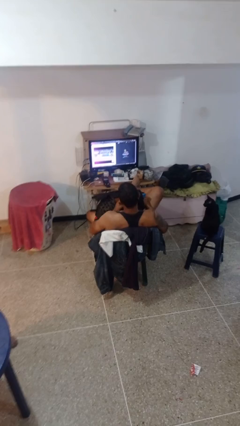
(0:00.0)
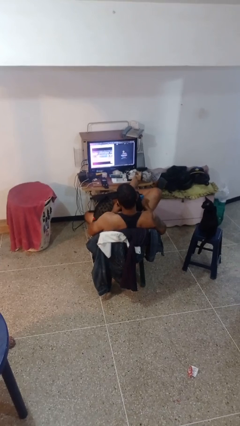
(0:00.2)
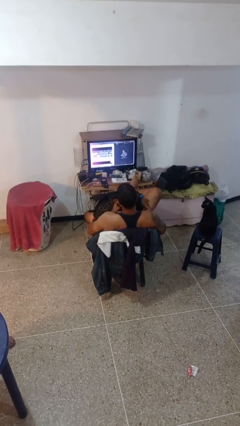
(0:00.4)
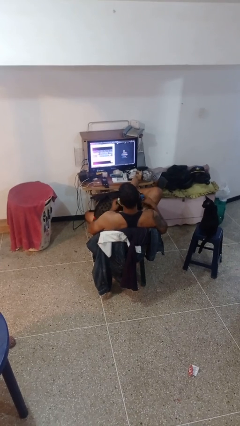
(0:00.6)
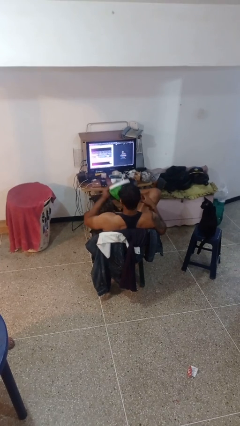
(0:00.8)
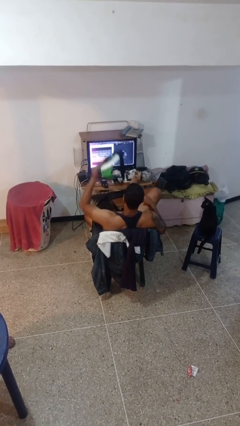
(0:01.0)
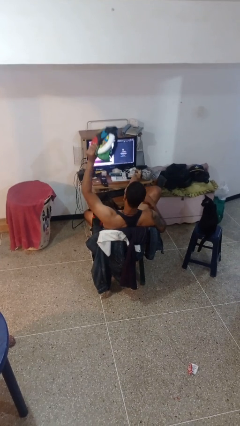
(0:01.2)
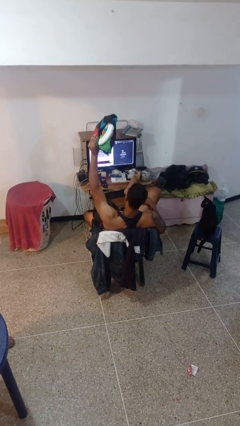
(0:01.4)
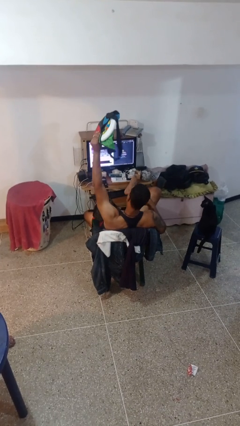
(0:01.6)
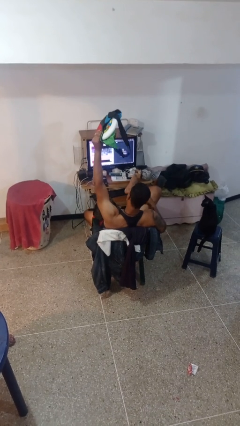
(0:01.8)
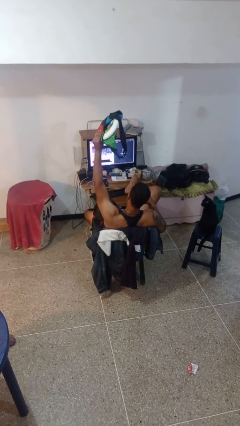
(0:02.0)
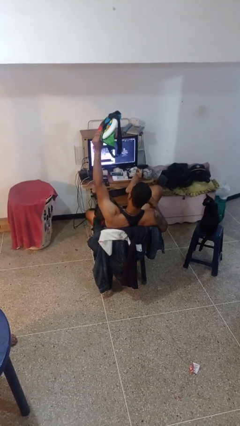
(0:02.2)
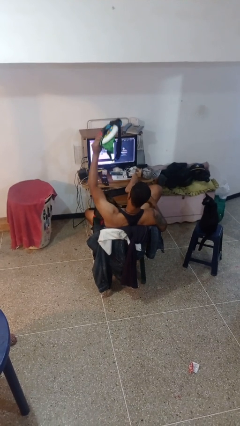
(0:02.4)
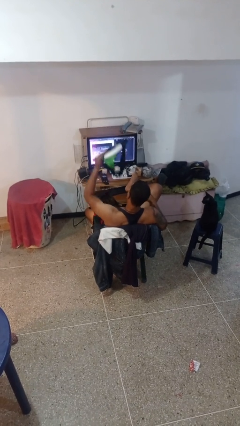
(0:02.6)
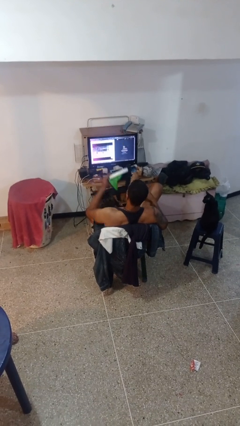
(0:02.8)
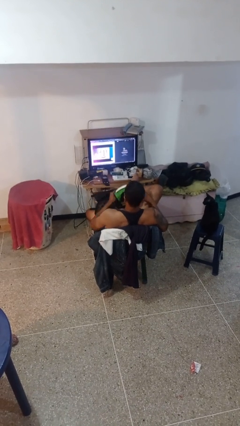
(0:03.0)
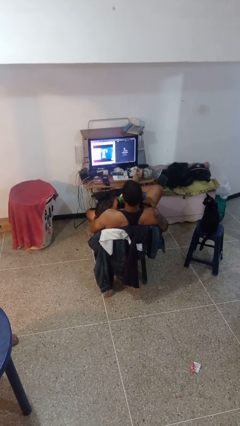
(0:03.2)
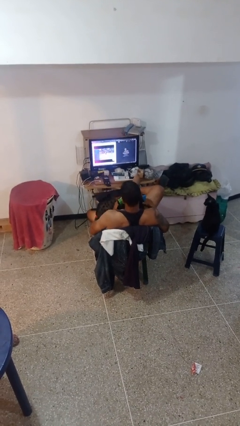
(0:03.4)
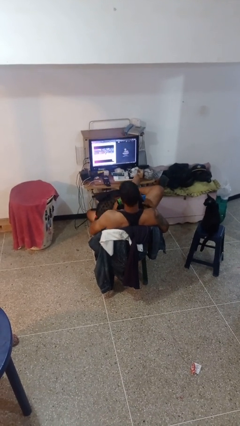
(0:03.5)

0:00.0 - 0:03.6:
person holds object above head

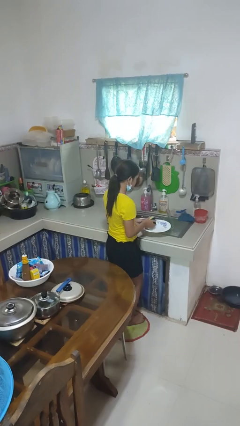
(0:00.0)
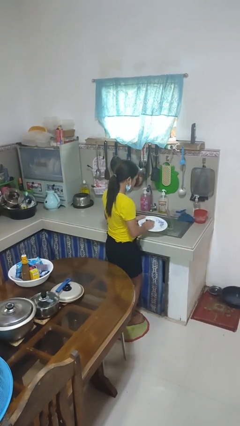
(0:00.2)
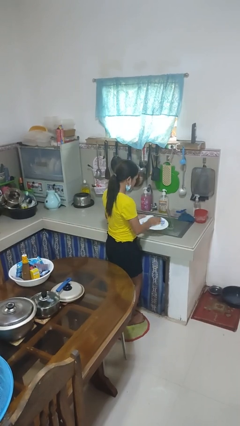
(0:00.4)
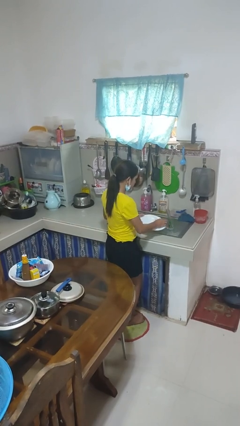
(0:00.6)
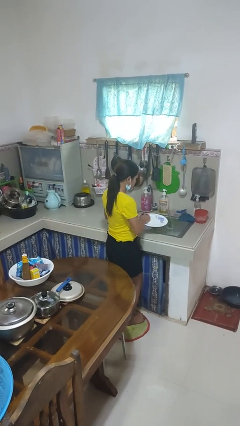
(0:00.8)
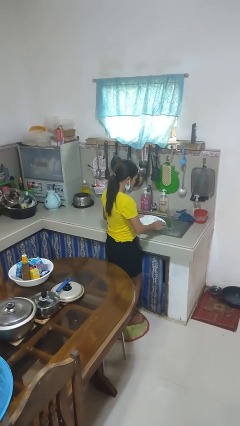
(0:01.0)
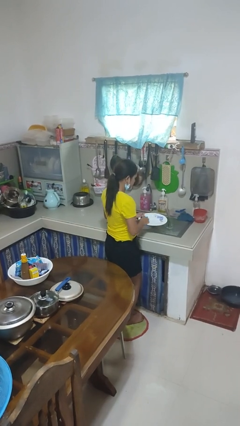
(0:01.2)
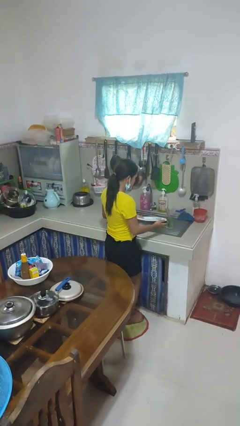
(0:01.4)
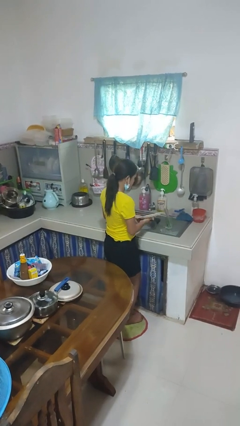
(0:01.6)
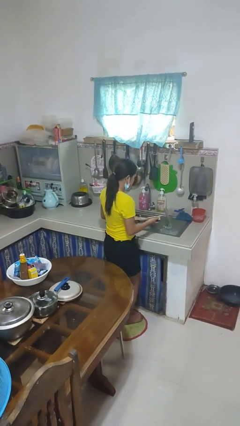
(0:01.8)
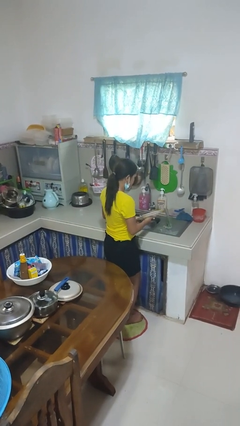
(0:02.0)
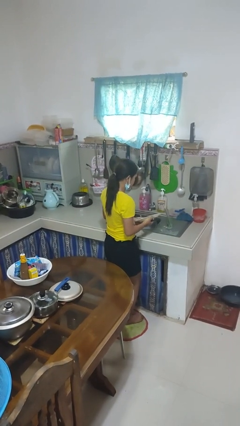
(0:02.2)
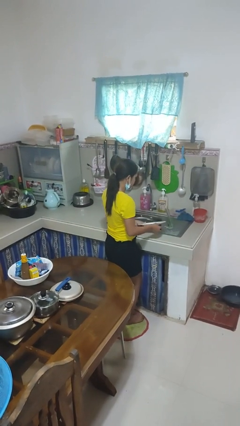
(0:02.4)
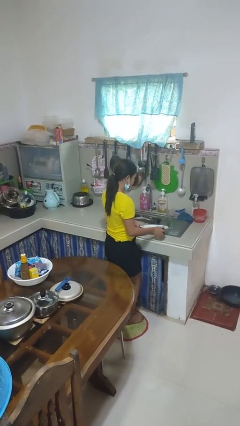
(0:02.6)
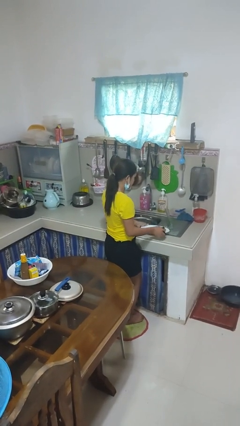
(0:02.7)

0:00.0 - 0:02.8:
person washes dish

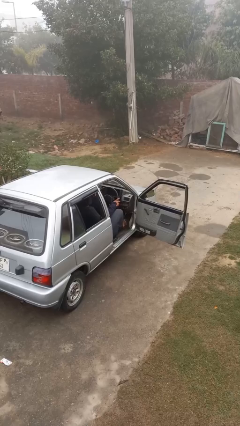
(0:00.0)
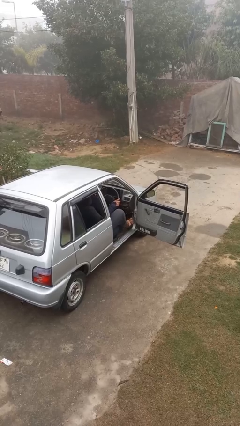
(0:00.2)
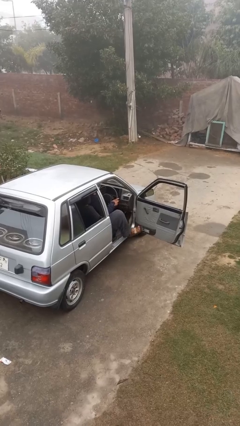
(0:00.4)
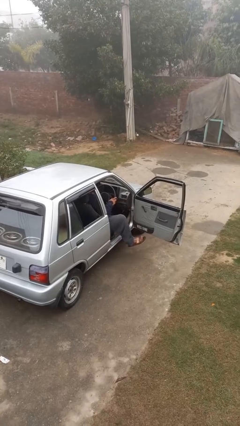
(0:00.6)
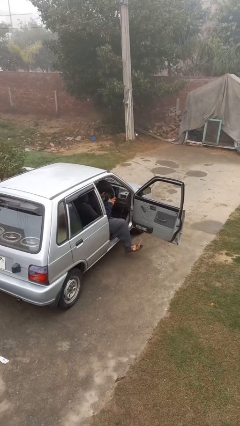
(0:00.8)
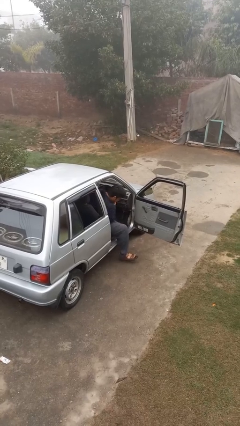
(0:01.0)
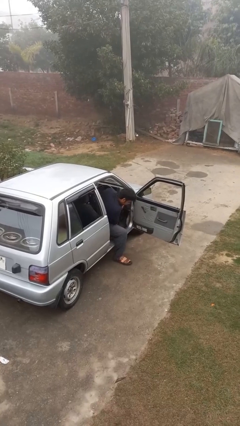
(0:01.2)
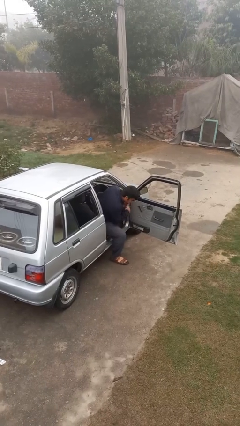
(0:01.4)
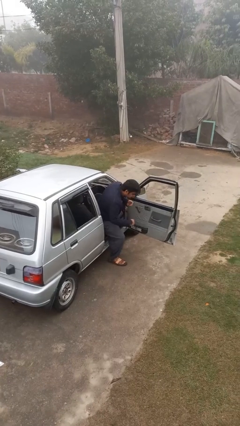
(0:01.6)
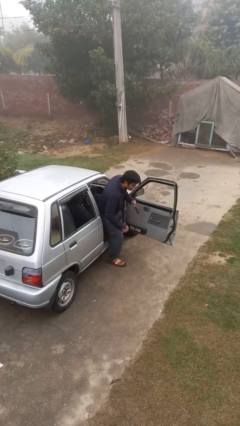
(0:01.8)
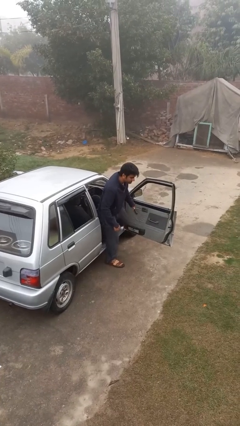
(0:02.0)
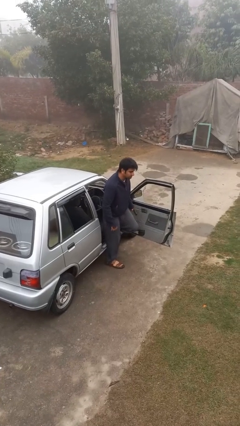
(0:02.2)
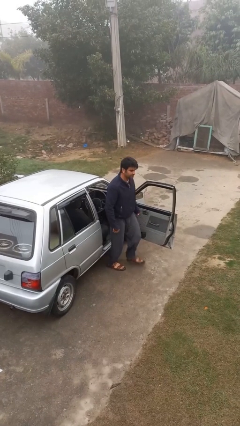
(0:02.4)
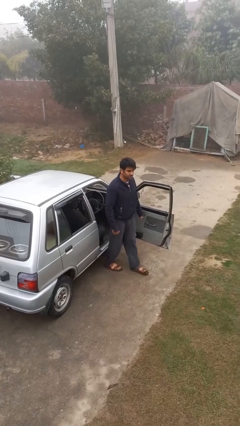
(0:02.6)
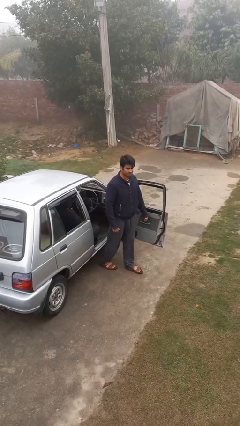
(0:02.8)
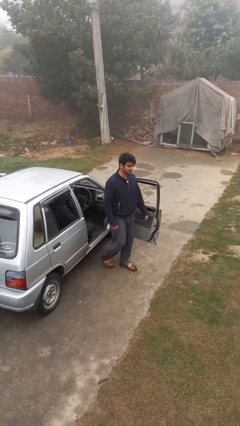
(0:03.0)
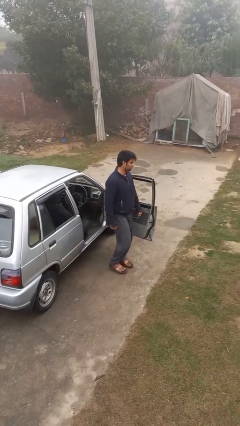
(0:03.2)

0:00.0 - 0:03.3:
person exits car

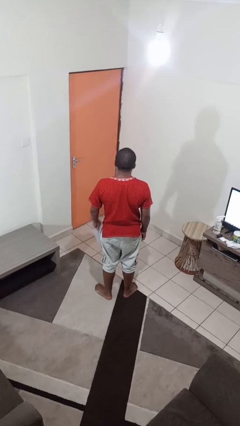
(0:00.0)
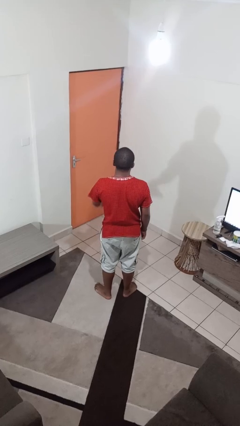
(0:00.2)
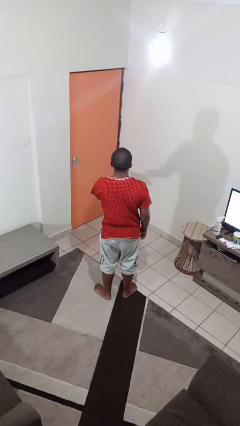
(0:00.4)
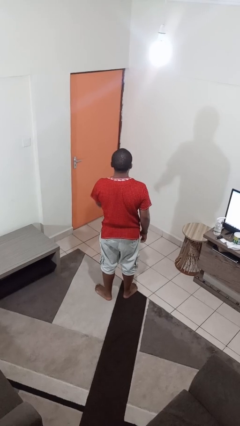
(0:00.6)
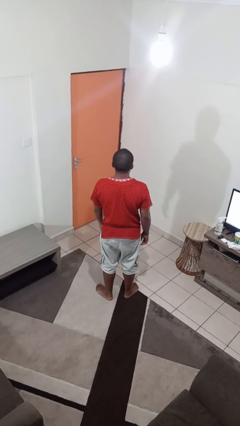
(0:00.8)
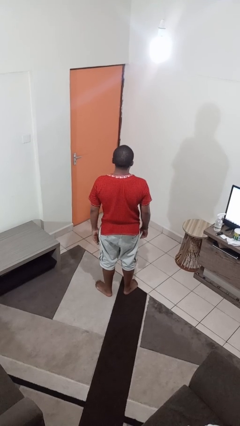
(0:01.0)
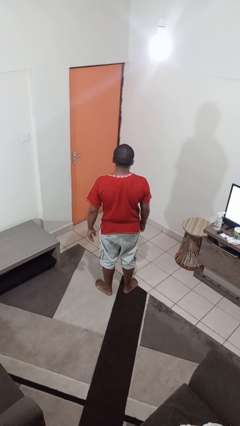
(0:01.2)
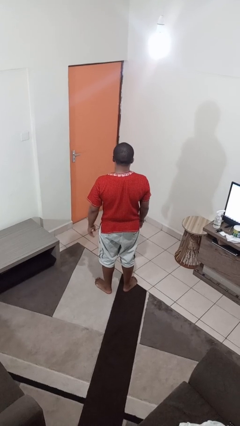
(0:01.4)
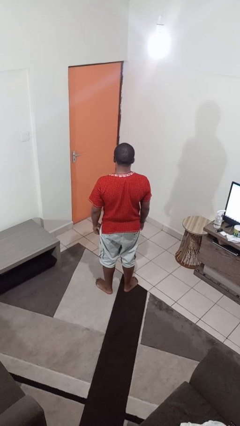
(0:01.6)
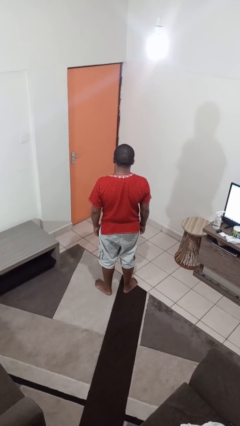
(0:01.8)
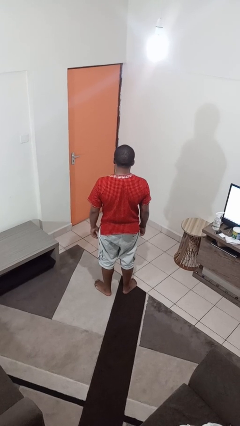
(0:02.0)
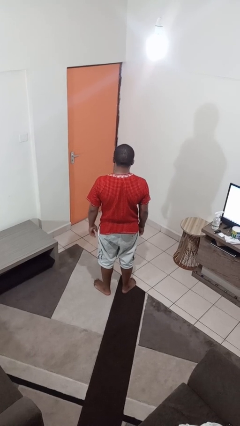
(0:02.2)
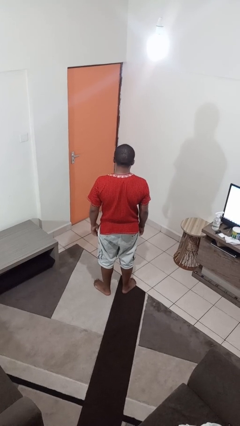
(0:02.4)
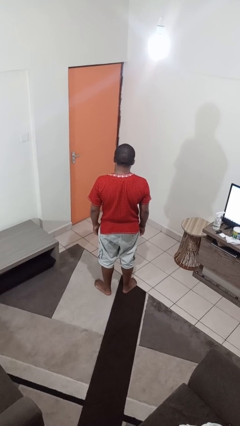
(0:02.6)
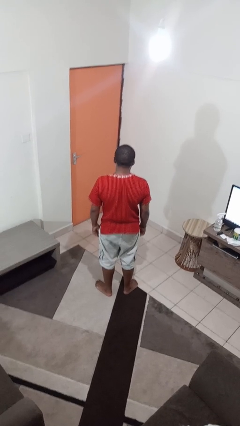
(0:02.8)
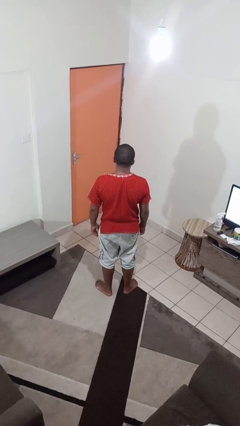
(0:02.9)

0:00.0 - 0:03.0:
person throws object to ground

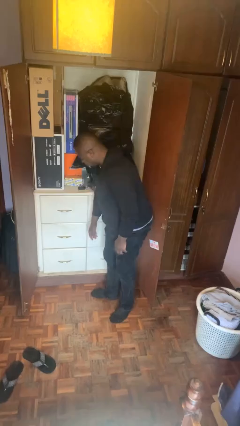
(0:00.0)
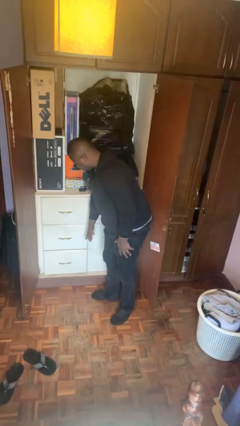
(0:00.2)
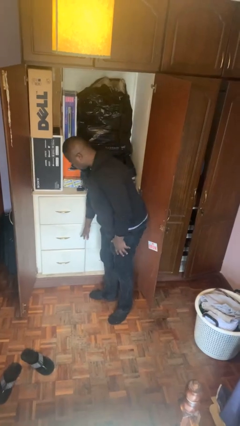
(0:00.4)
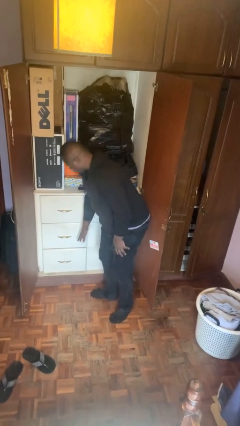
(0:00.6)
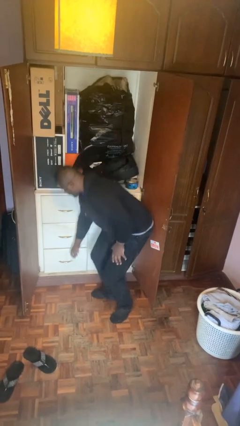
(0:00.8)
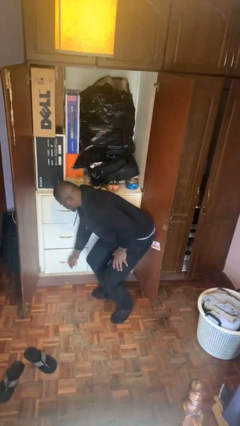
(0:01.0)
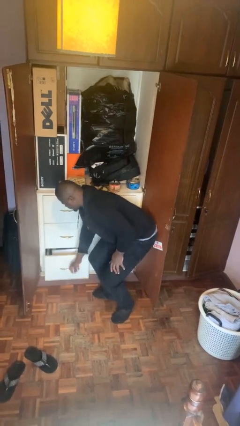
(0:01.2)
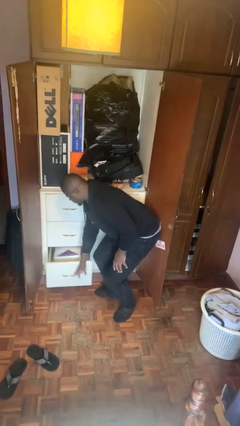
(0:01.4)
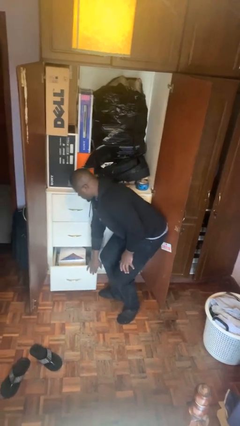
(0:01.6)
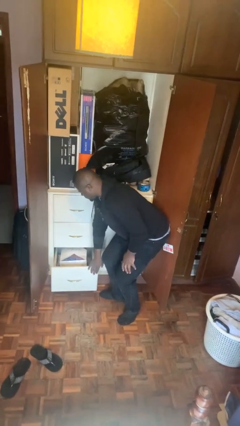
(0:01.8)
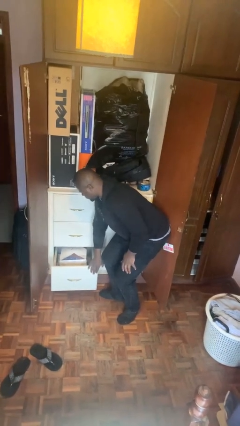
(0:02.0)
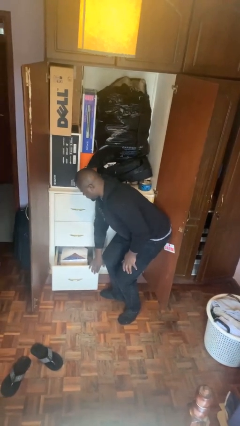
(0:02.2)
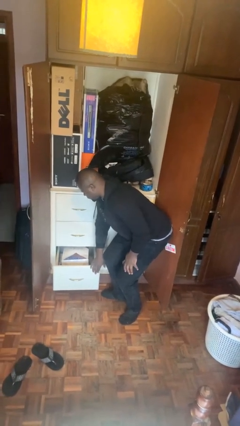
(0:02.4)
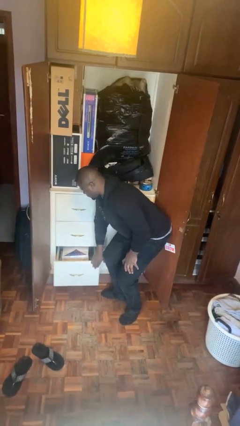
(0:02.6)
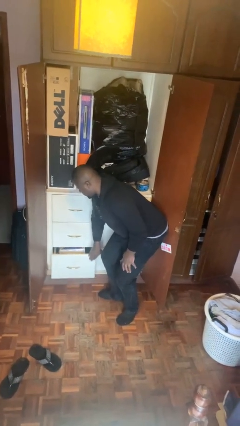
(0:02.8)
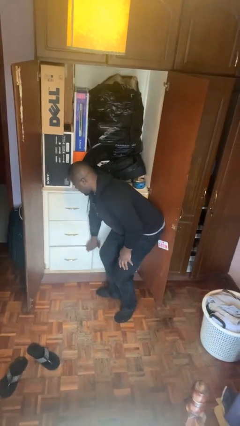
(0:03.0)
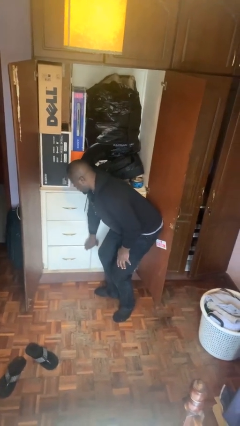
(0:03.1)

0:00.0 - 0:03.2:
person opens dresser drawer

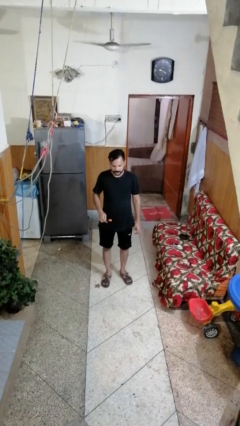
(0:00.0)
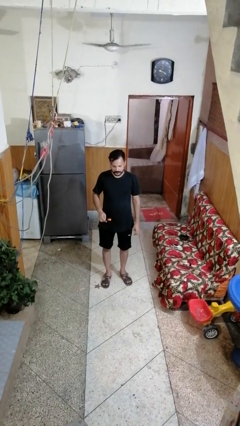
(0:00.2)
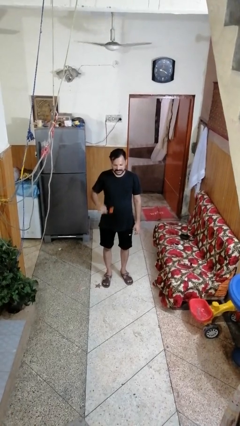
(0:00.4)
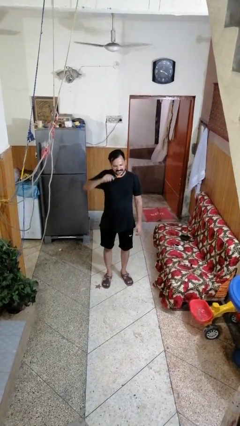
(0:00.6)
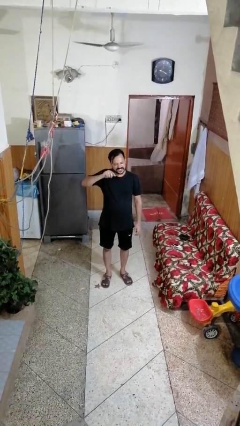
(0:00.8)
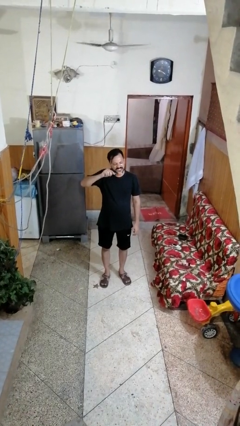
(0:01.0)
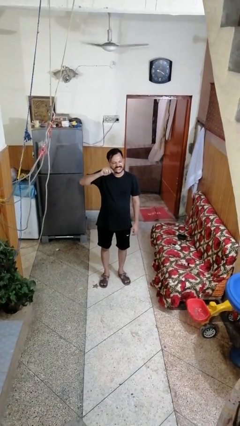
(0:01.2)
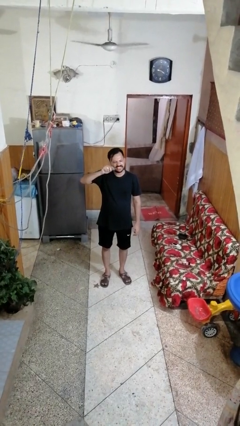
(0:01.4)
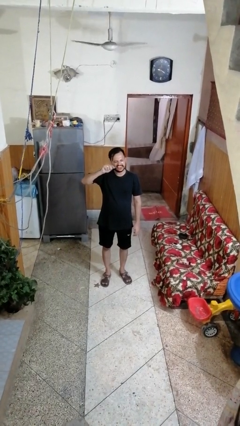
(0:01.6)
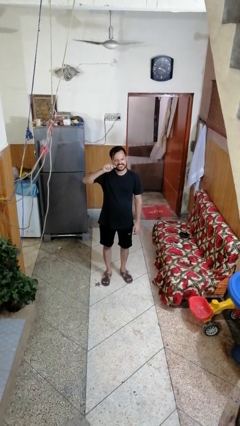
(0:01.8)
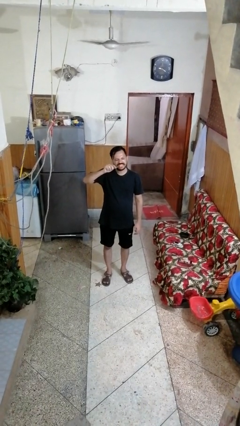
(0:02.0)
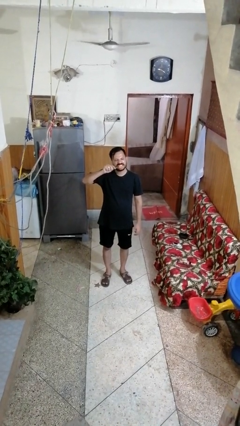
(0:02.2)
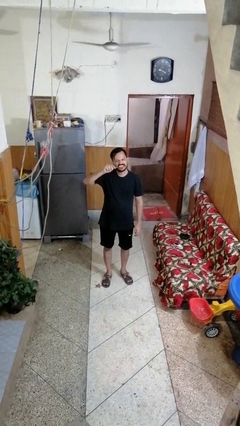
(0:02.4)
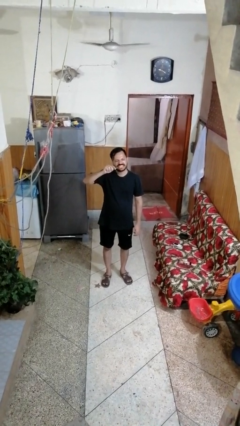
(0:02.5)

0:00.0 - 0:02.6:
person brushes teeth
